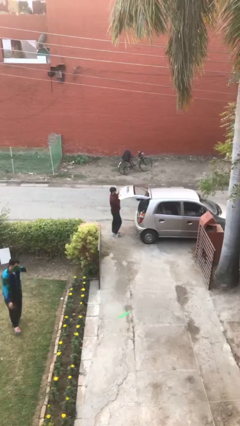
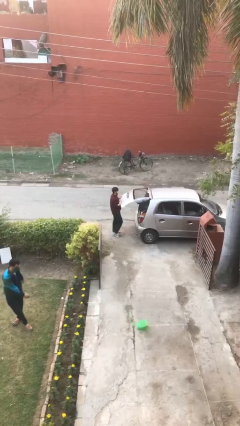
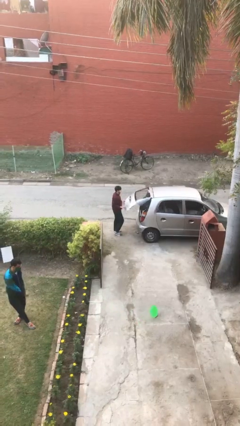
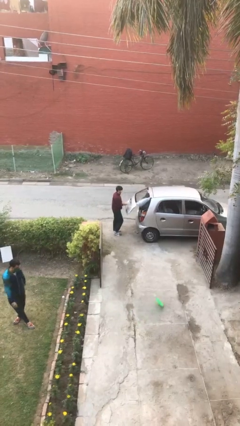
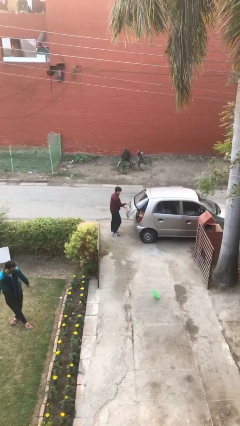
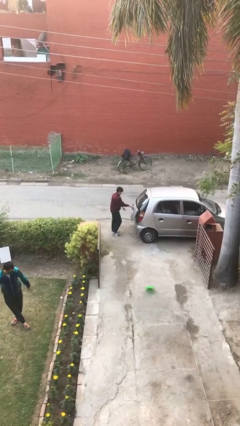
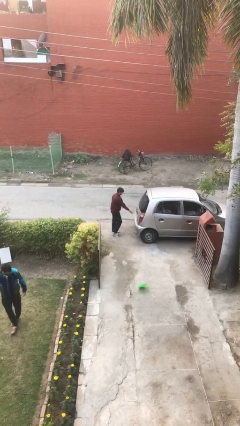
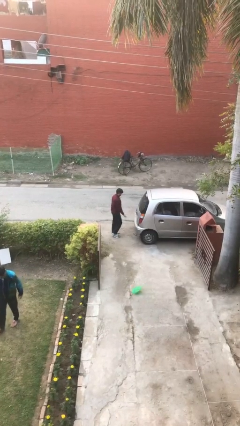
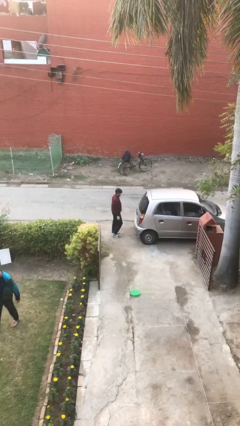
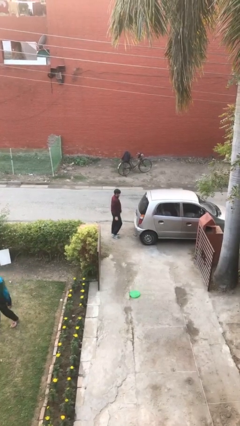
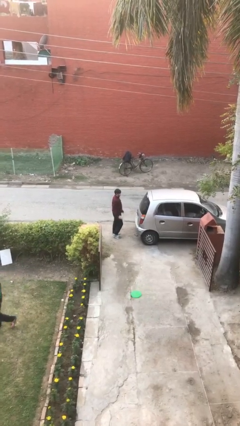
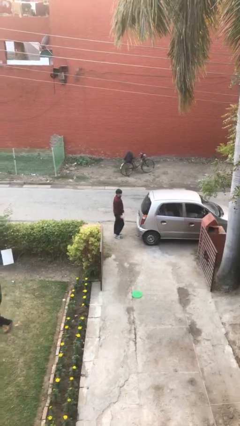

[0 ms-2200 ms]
person closes car trunk

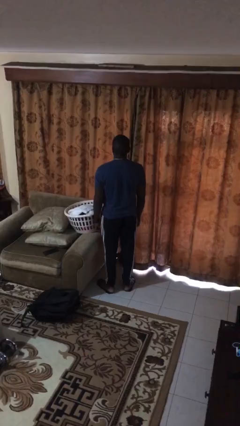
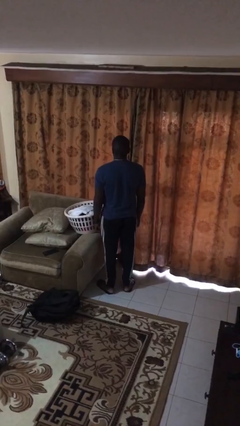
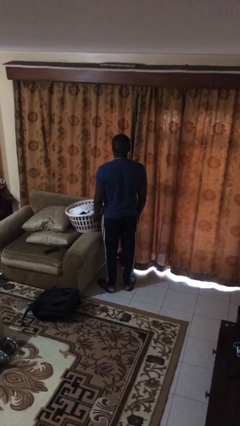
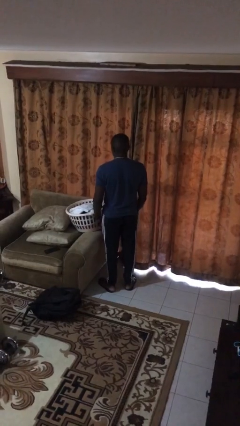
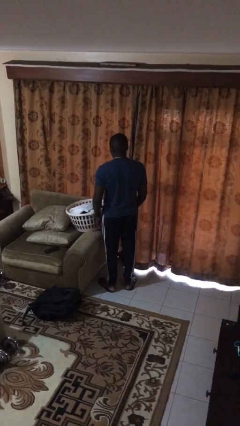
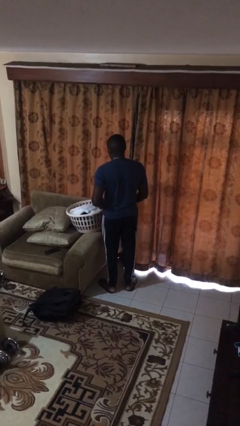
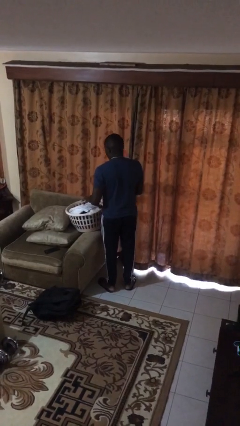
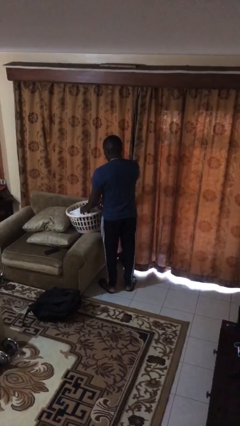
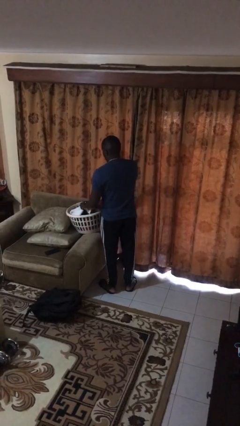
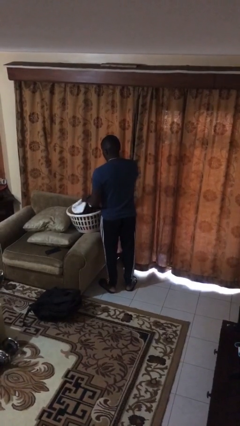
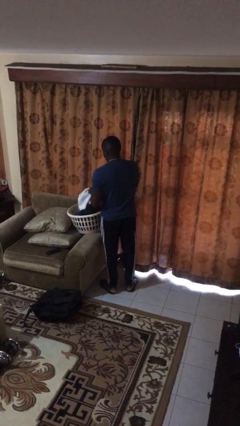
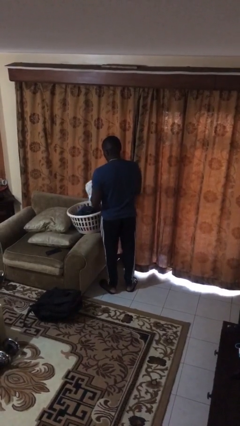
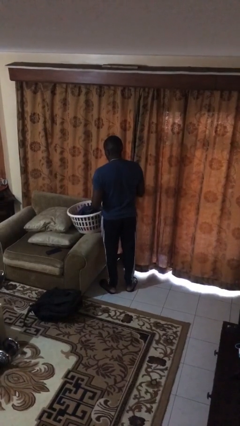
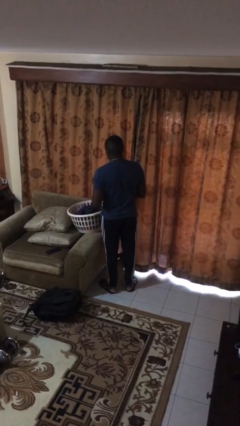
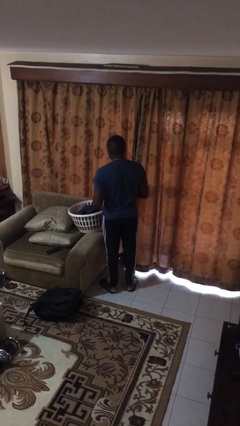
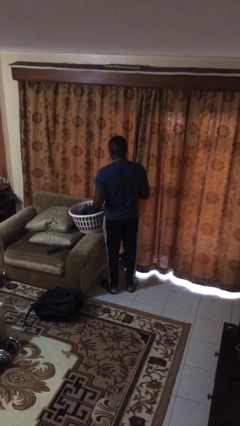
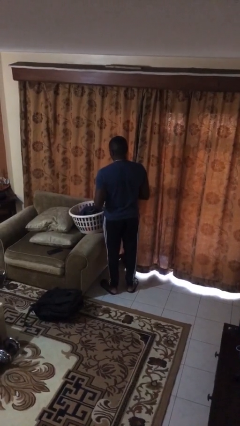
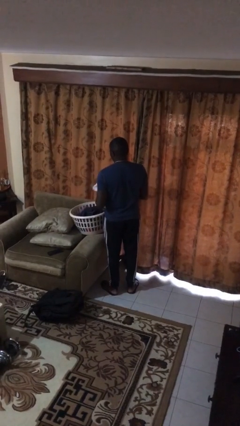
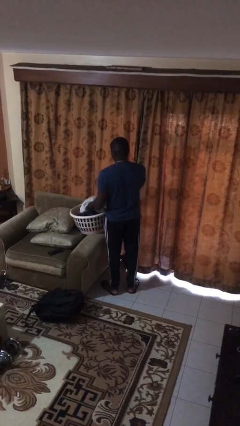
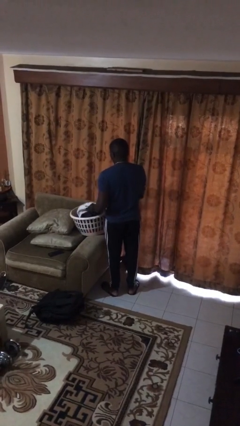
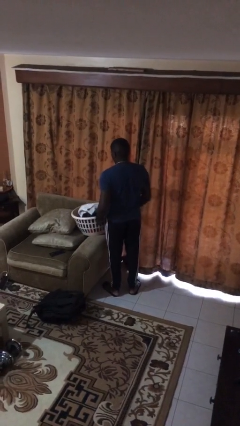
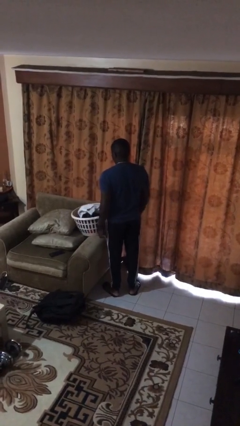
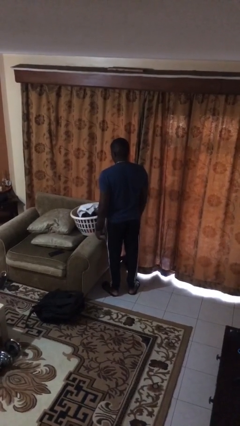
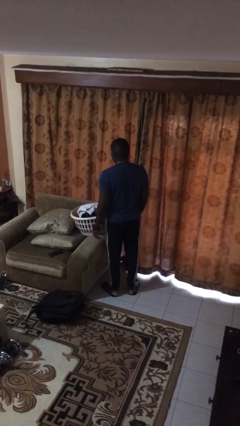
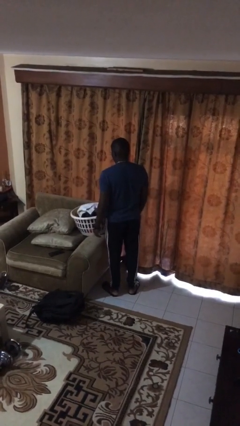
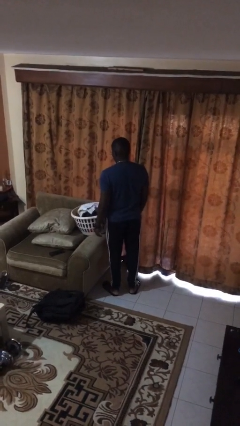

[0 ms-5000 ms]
person puts object into basket

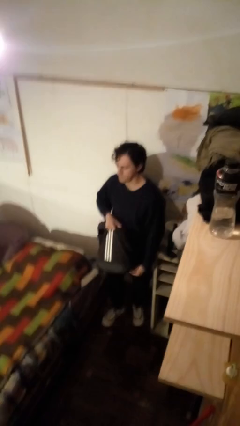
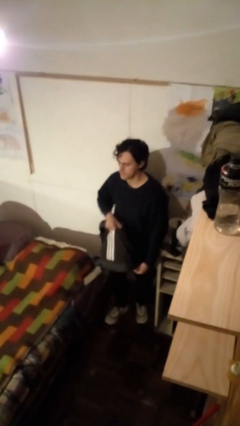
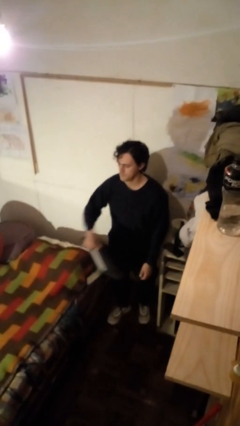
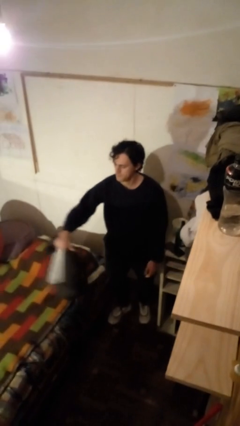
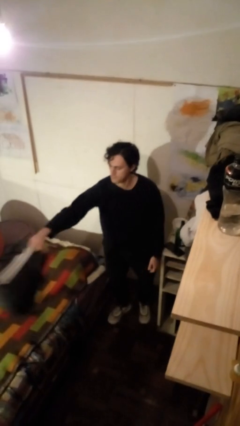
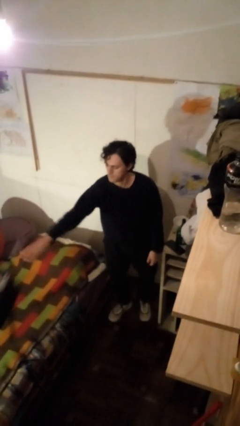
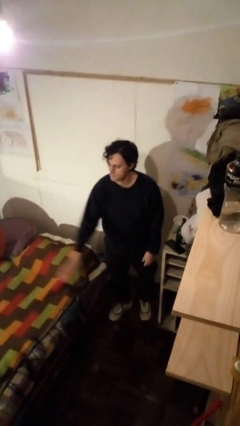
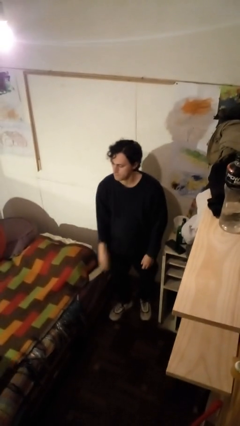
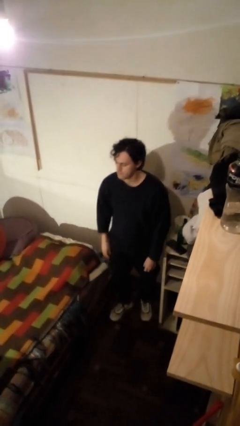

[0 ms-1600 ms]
person throws object on bed

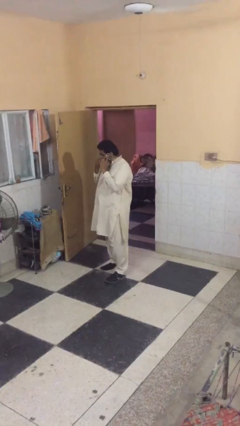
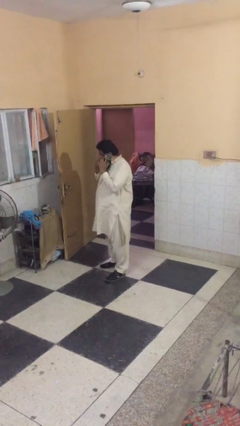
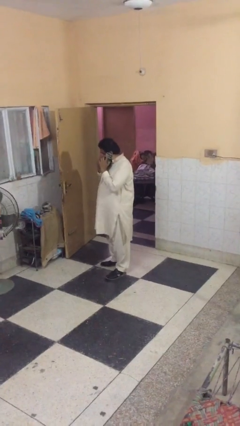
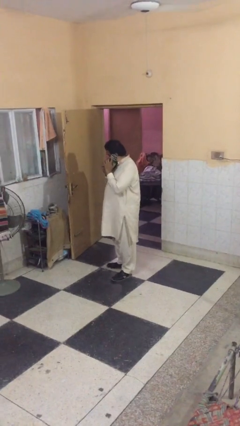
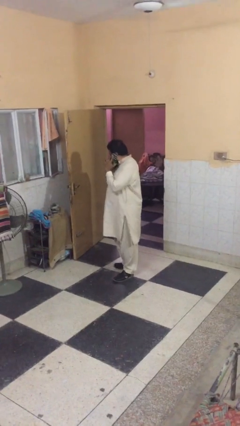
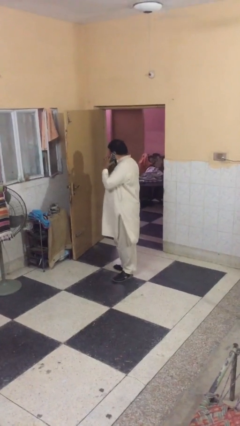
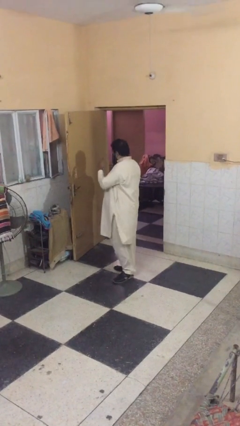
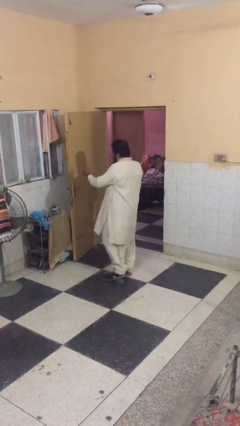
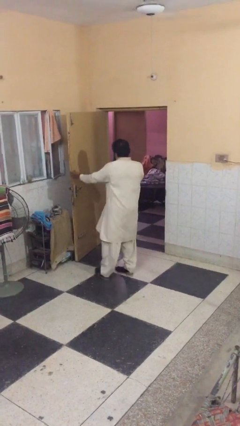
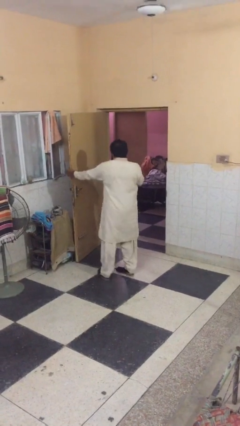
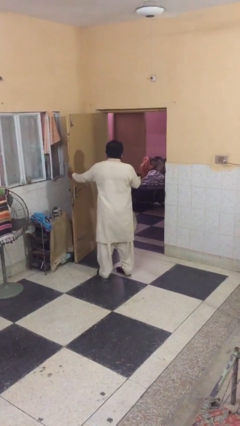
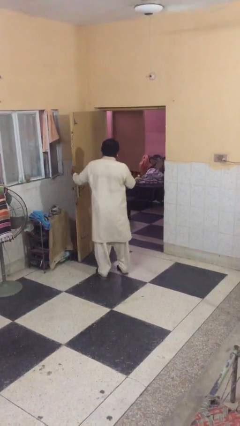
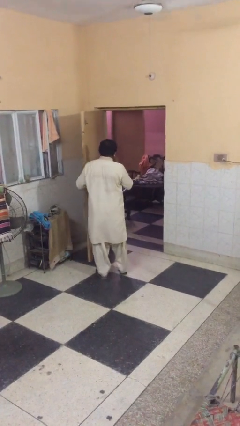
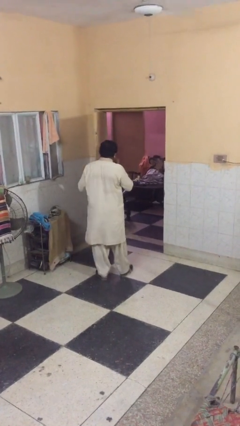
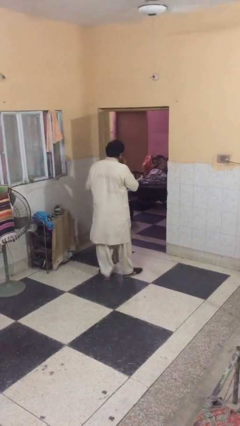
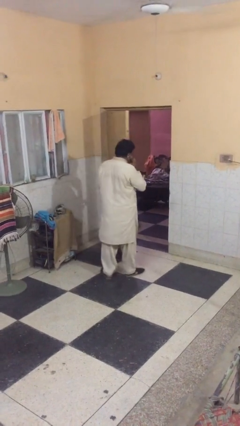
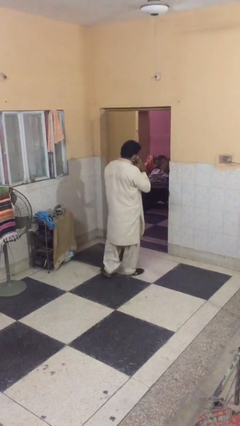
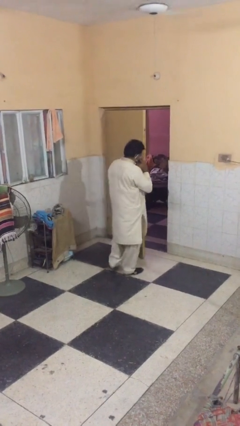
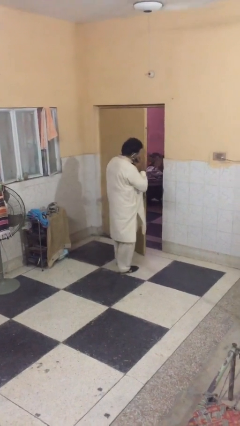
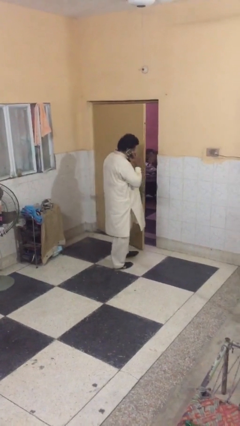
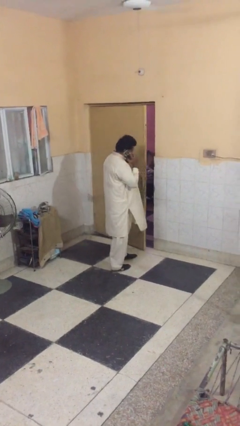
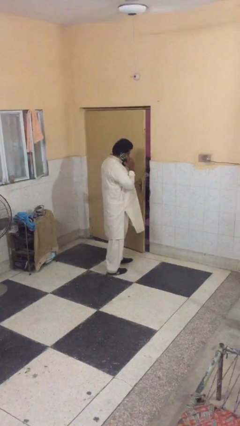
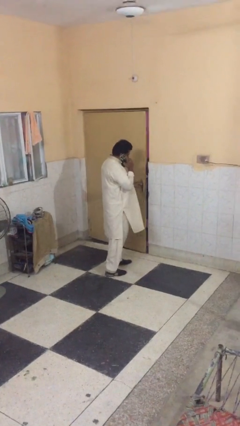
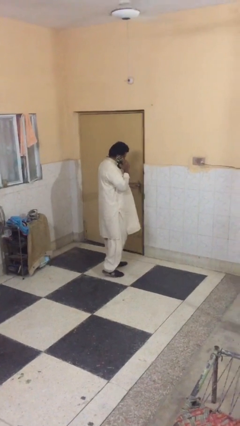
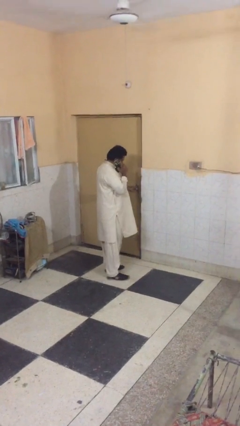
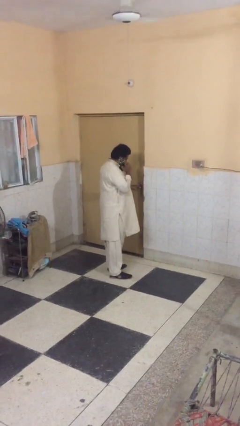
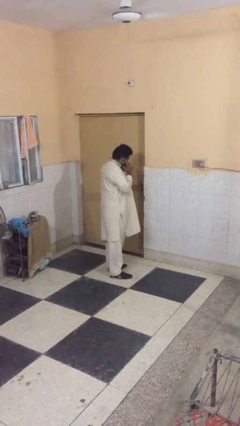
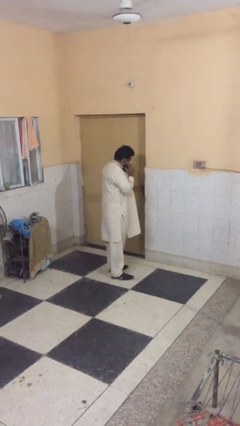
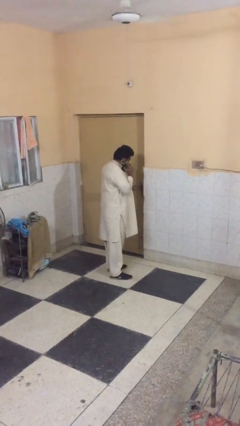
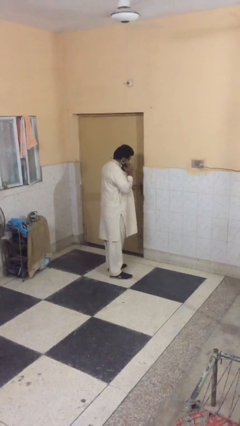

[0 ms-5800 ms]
person closes facility door

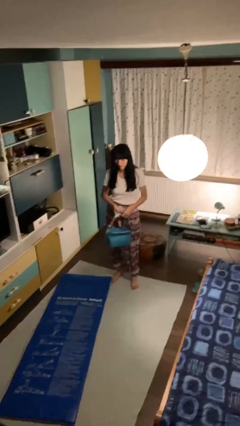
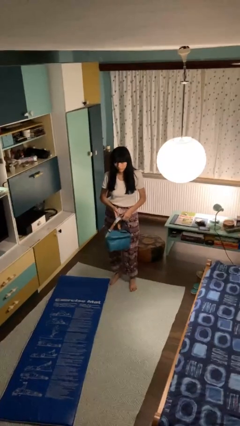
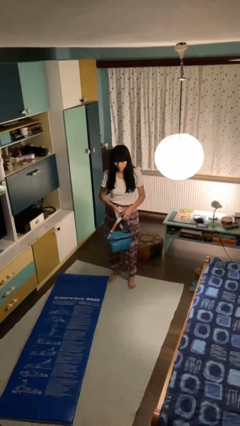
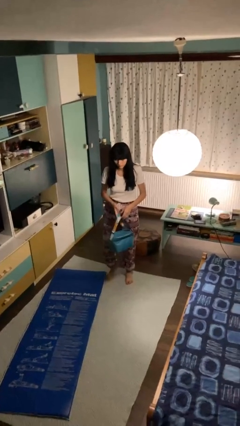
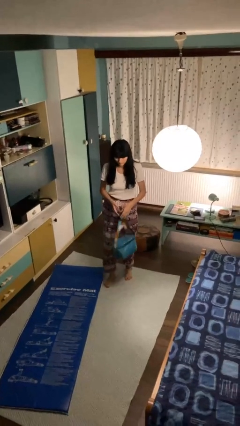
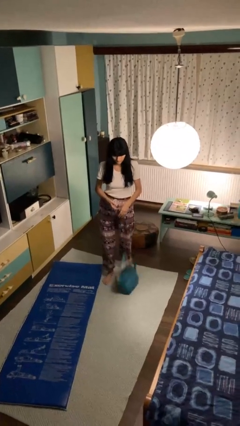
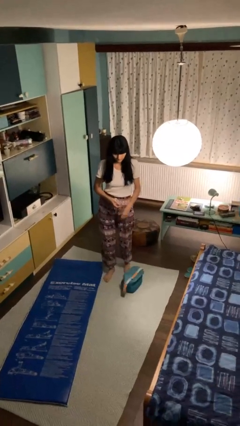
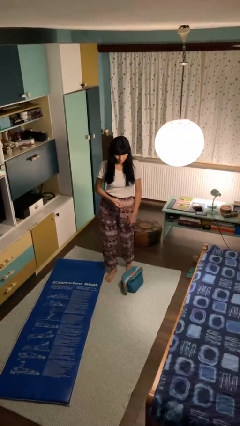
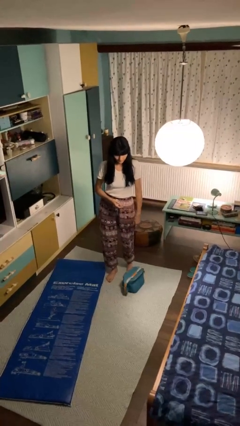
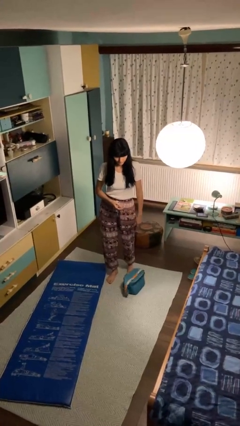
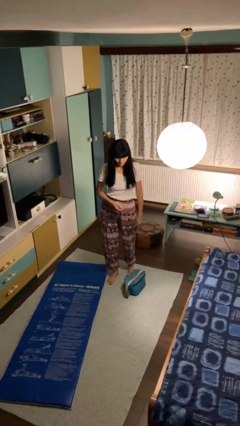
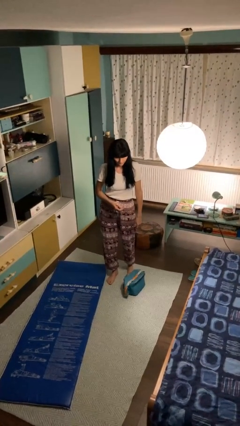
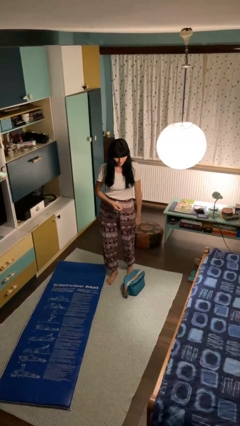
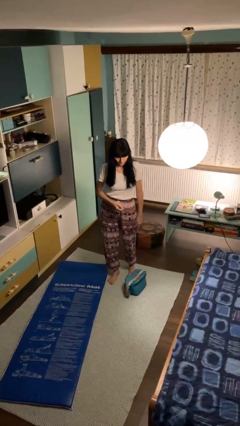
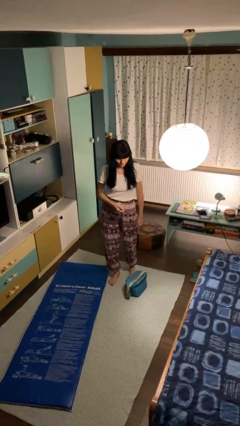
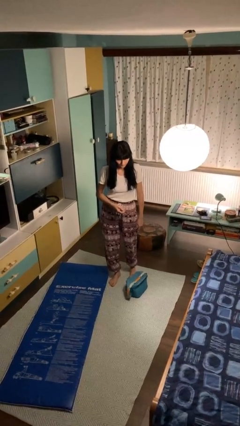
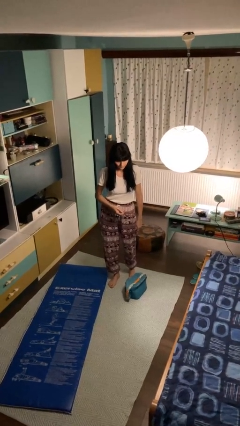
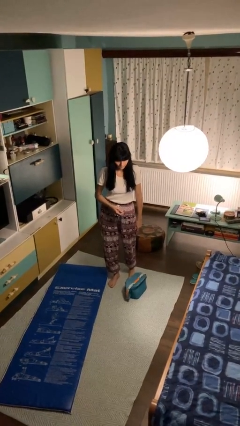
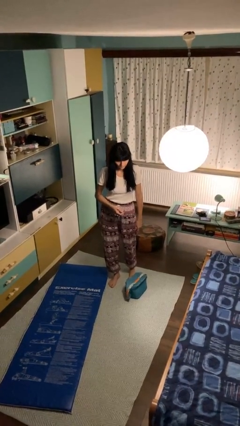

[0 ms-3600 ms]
person drops object
